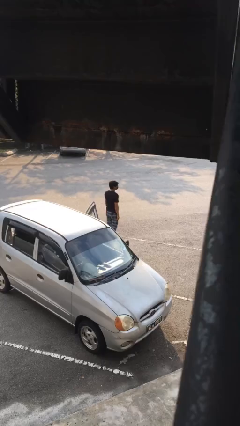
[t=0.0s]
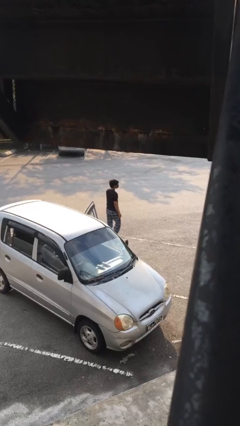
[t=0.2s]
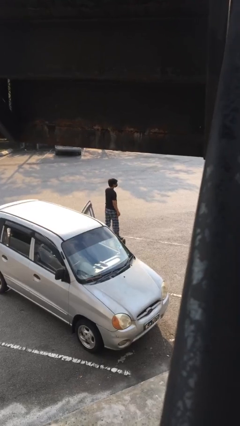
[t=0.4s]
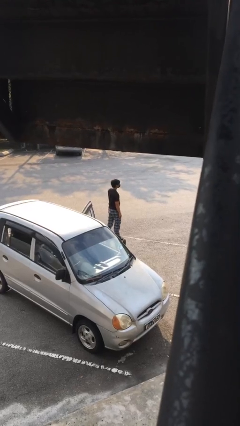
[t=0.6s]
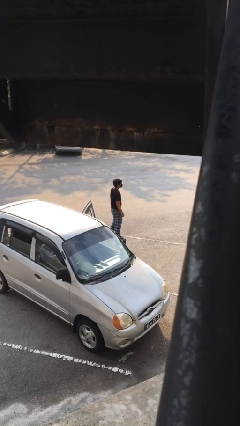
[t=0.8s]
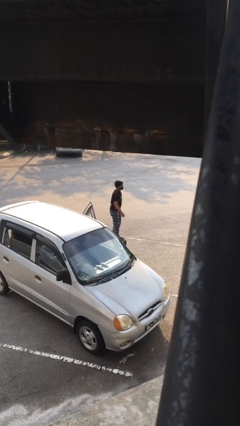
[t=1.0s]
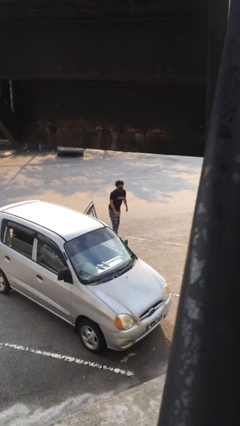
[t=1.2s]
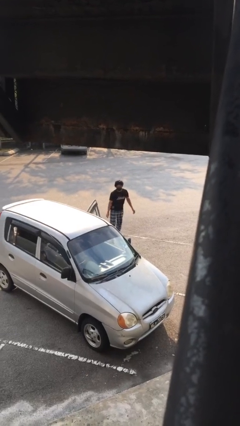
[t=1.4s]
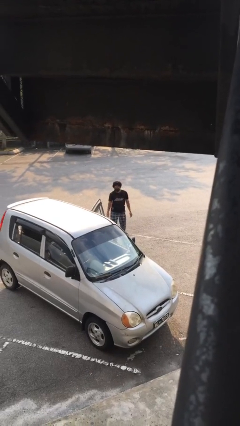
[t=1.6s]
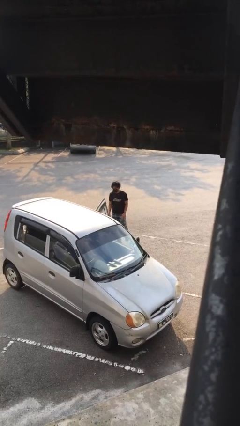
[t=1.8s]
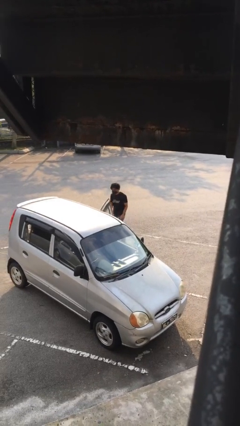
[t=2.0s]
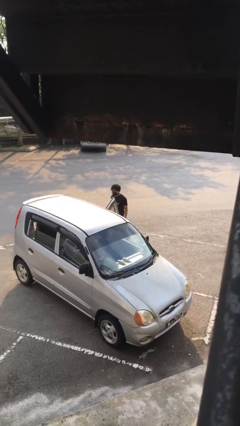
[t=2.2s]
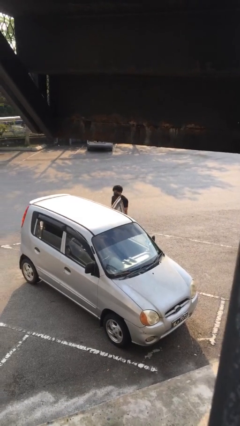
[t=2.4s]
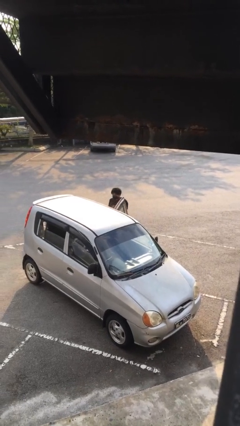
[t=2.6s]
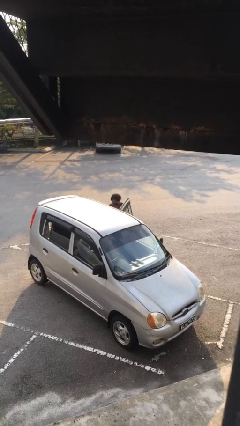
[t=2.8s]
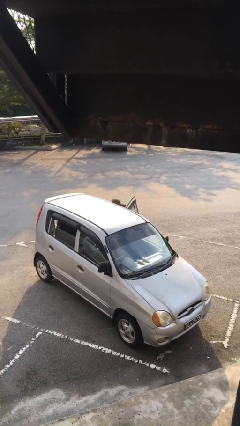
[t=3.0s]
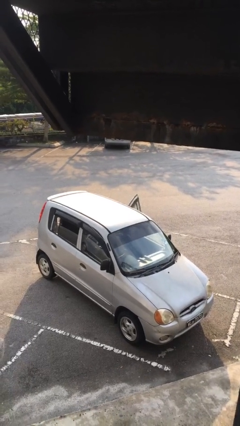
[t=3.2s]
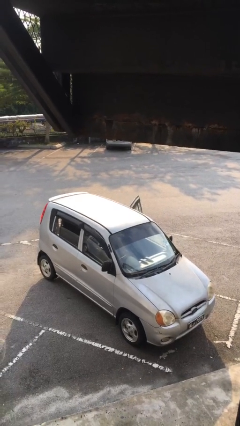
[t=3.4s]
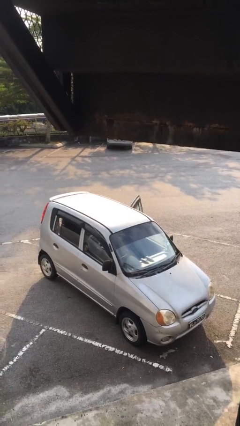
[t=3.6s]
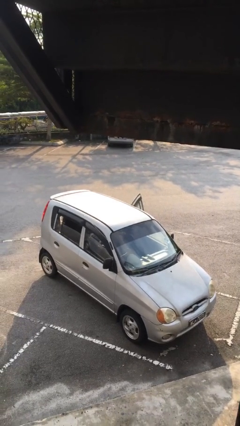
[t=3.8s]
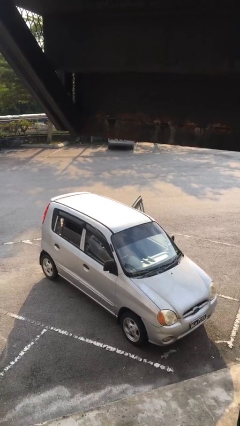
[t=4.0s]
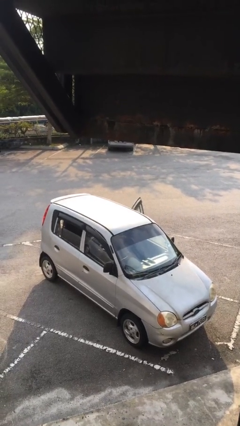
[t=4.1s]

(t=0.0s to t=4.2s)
person enters car

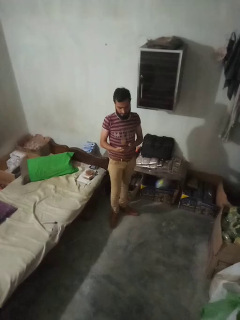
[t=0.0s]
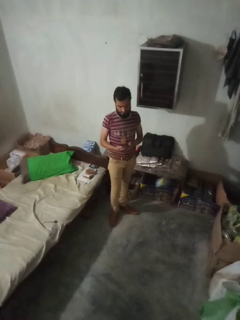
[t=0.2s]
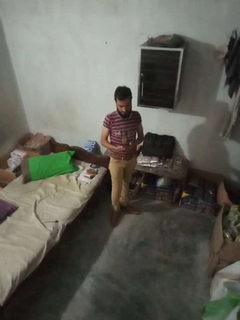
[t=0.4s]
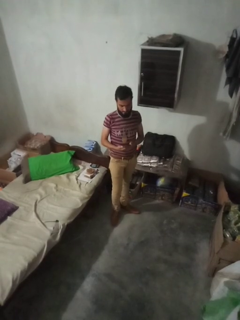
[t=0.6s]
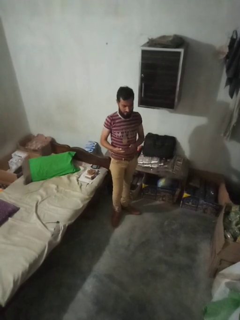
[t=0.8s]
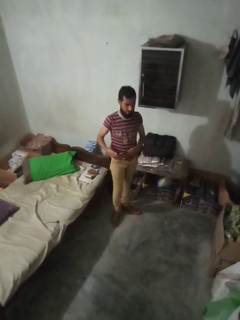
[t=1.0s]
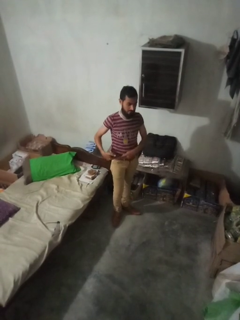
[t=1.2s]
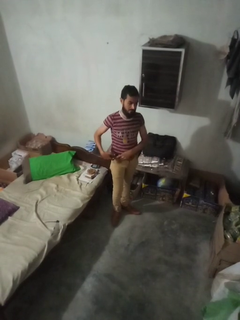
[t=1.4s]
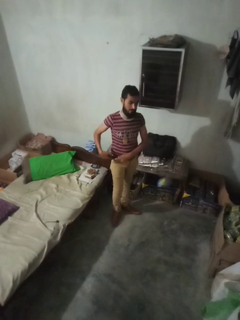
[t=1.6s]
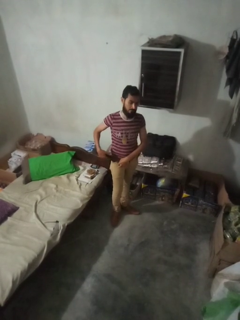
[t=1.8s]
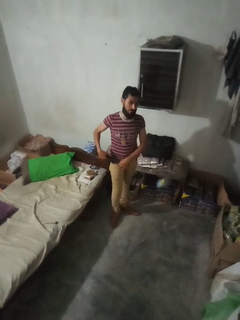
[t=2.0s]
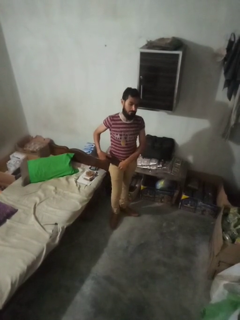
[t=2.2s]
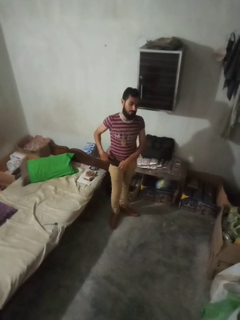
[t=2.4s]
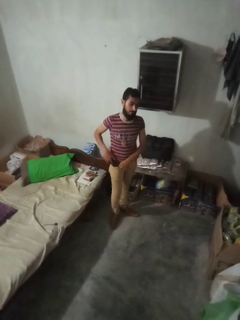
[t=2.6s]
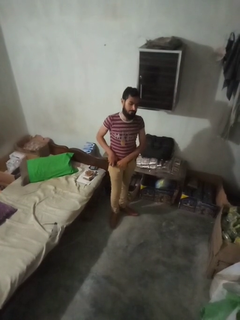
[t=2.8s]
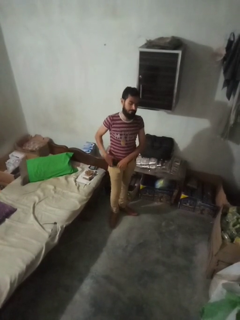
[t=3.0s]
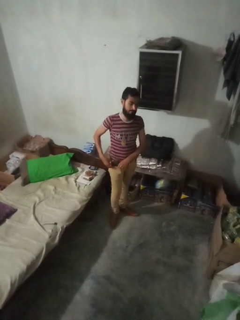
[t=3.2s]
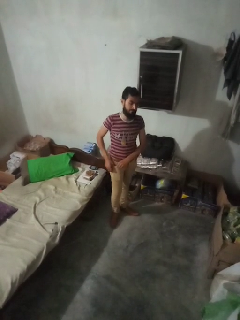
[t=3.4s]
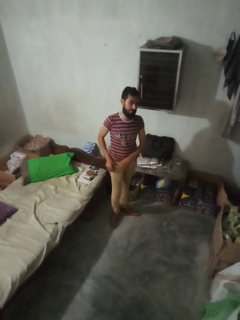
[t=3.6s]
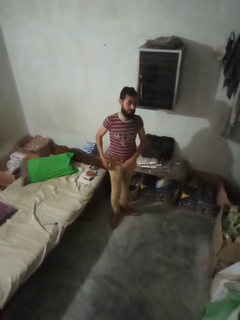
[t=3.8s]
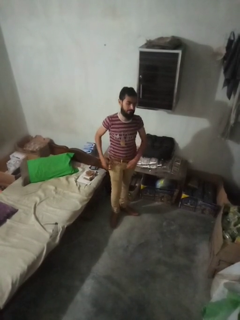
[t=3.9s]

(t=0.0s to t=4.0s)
person puts phone into pocket

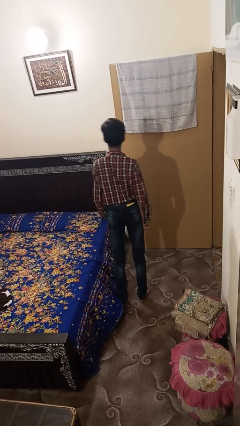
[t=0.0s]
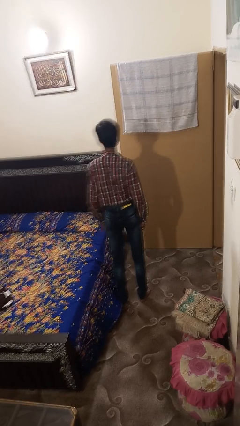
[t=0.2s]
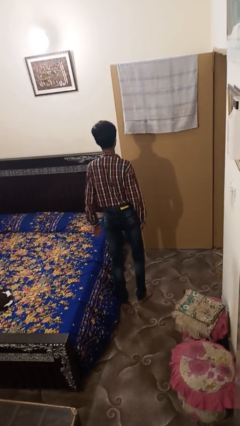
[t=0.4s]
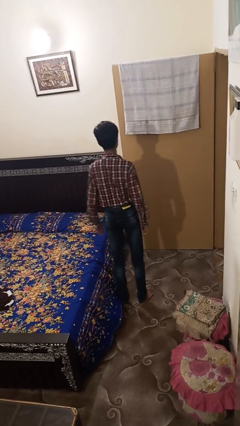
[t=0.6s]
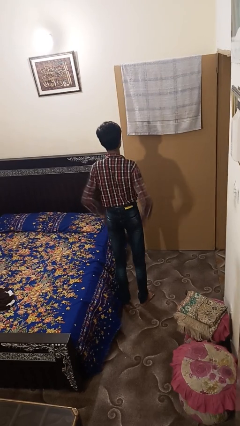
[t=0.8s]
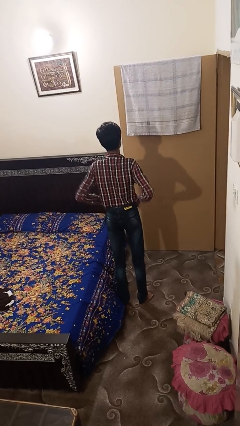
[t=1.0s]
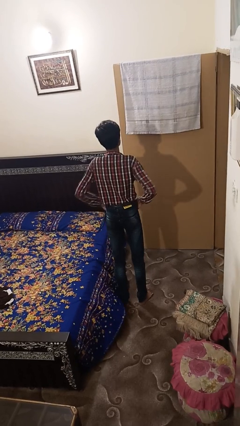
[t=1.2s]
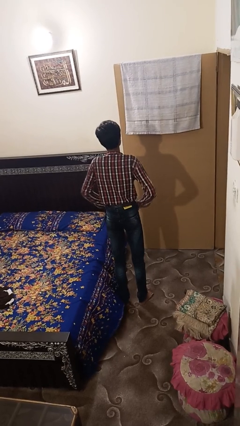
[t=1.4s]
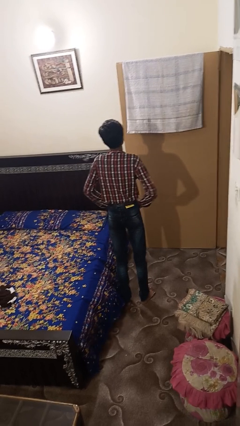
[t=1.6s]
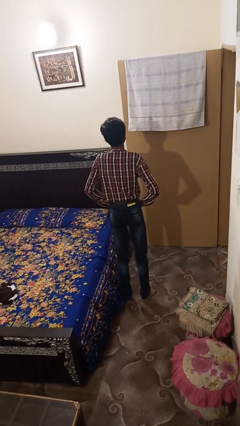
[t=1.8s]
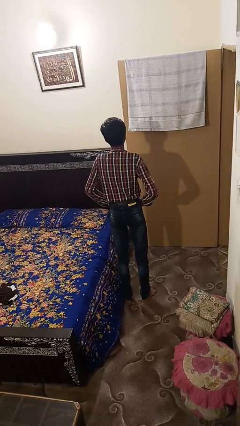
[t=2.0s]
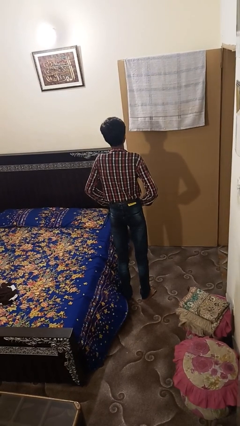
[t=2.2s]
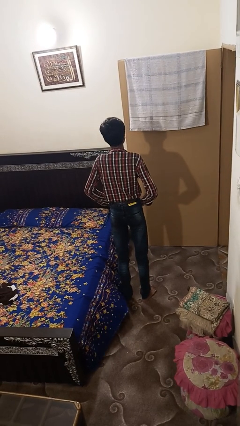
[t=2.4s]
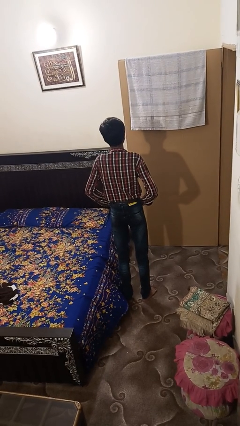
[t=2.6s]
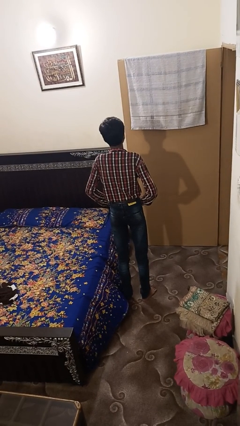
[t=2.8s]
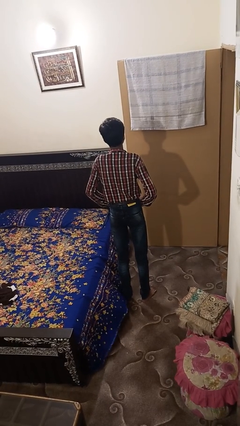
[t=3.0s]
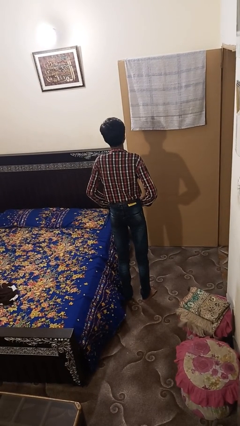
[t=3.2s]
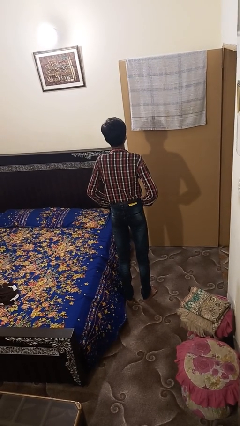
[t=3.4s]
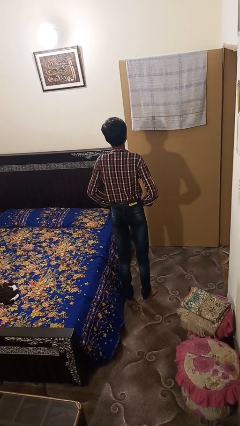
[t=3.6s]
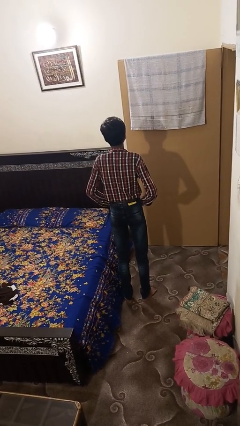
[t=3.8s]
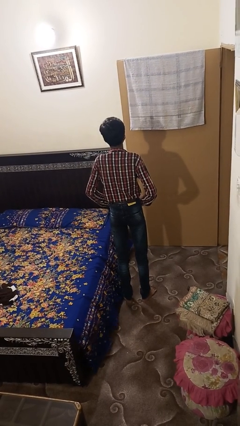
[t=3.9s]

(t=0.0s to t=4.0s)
person puts hands in back pockets

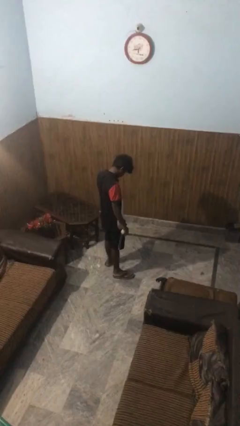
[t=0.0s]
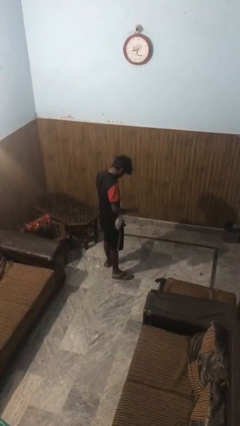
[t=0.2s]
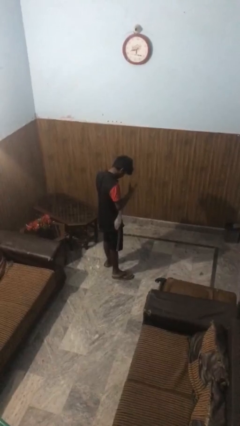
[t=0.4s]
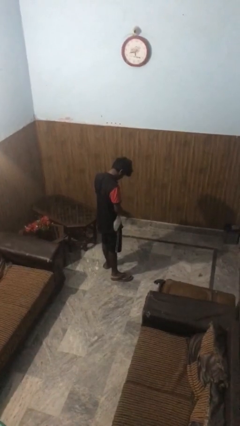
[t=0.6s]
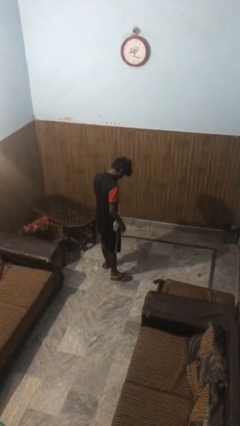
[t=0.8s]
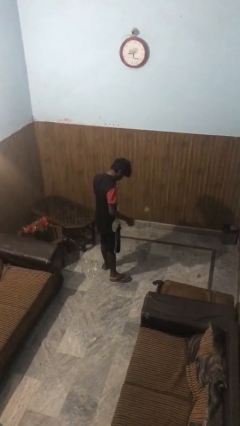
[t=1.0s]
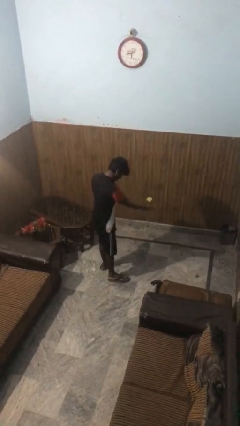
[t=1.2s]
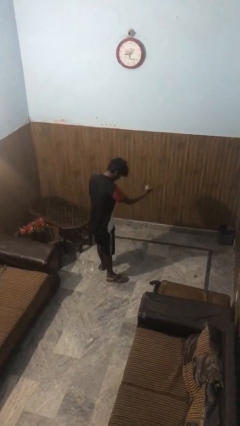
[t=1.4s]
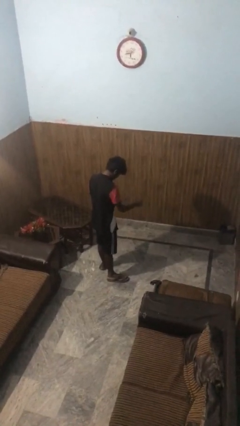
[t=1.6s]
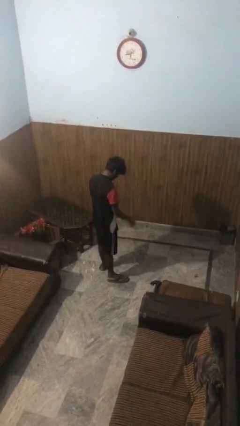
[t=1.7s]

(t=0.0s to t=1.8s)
person bounces ball on floor

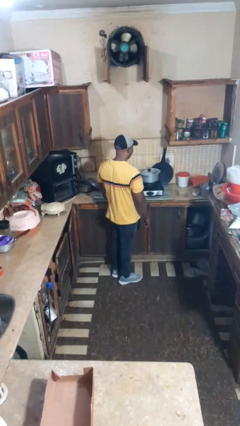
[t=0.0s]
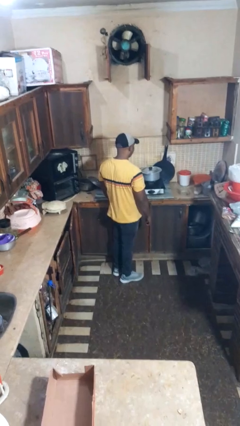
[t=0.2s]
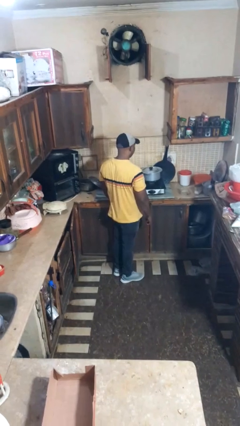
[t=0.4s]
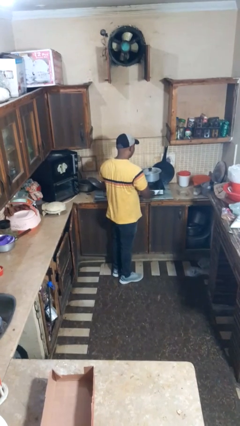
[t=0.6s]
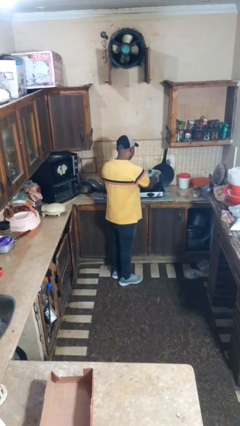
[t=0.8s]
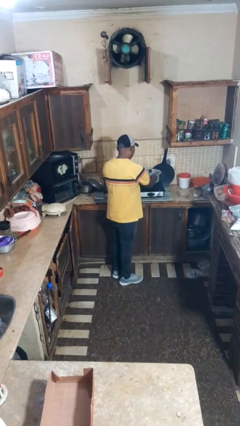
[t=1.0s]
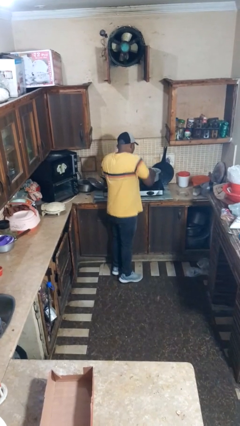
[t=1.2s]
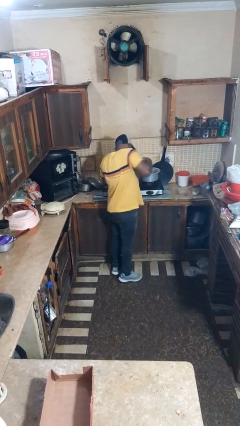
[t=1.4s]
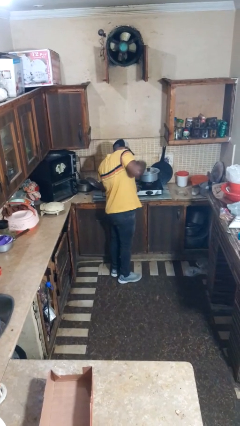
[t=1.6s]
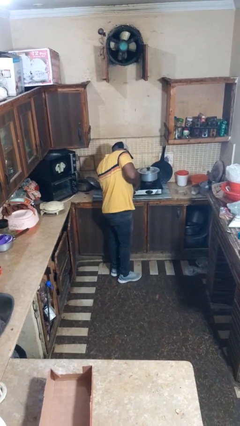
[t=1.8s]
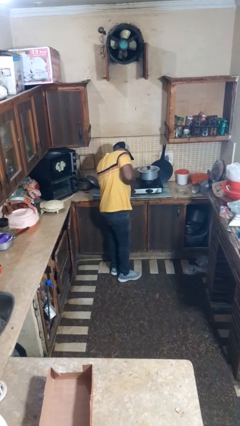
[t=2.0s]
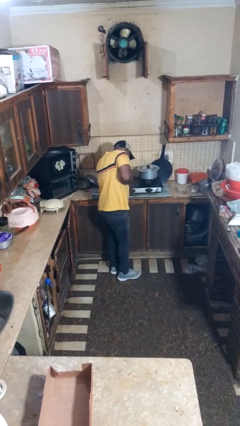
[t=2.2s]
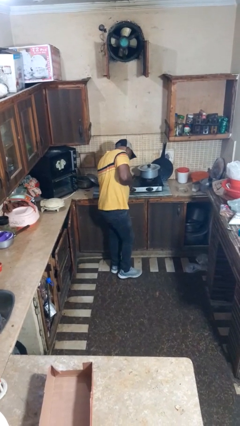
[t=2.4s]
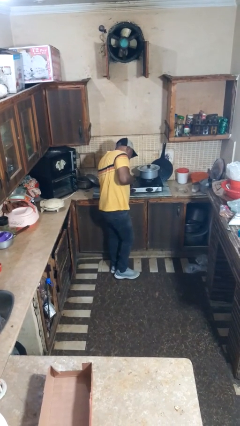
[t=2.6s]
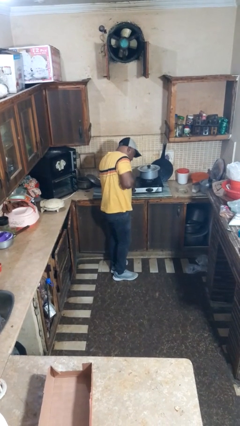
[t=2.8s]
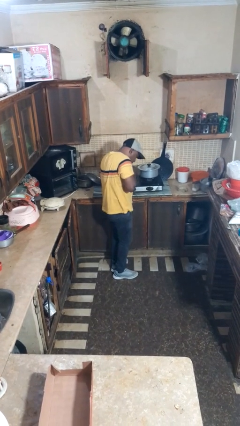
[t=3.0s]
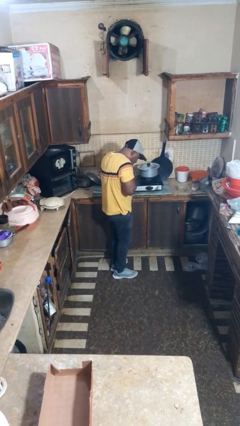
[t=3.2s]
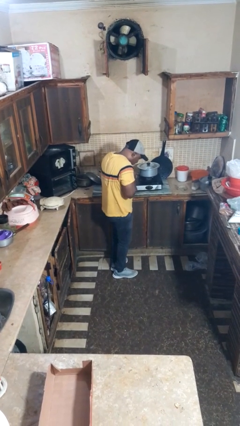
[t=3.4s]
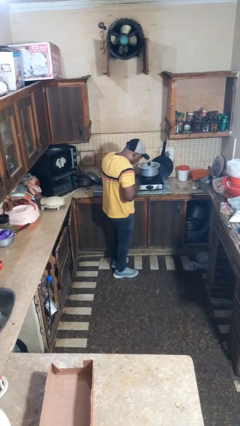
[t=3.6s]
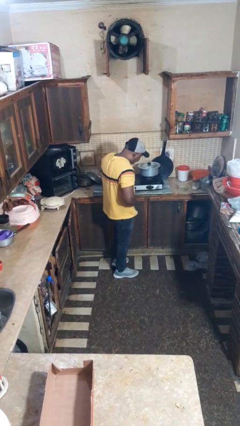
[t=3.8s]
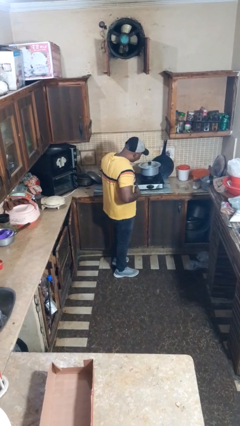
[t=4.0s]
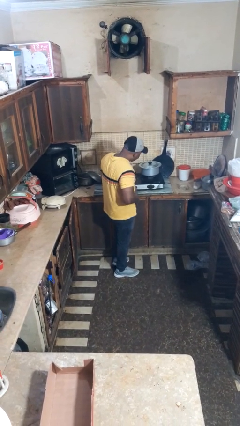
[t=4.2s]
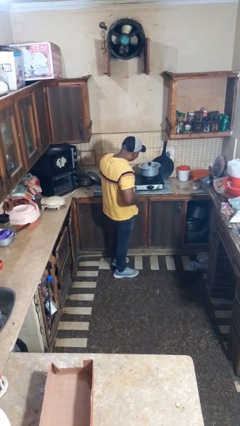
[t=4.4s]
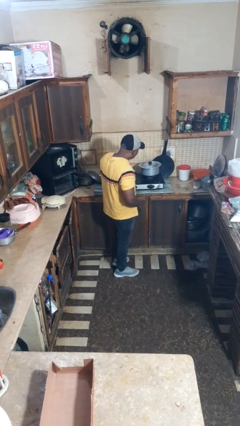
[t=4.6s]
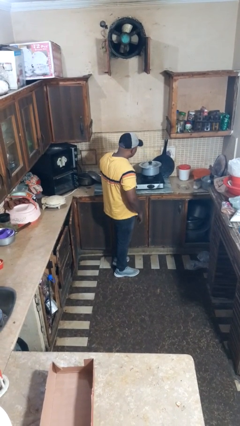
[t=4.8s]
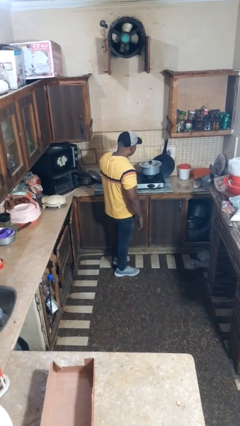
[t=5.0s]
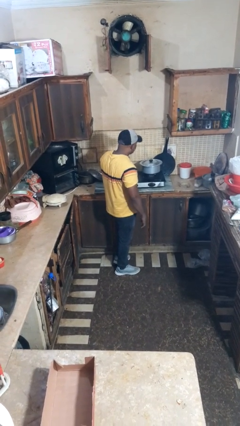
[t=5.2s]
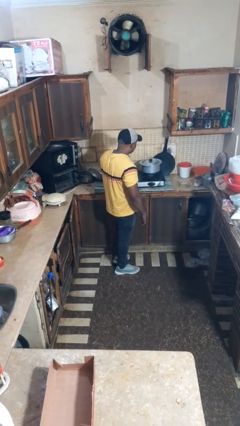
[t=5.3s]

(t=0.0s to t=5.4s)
person burns hand
